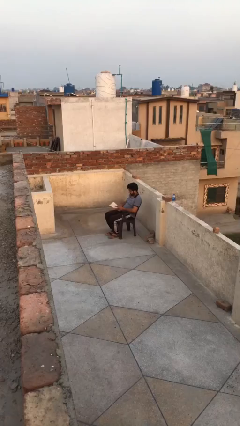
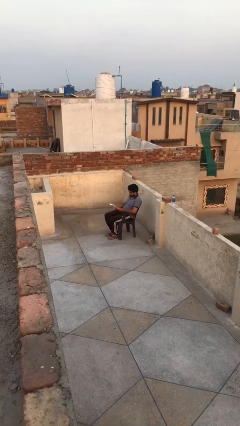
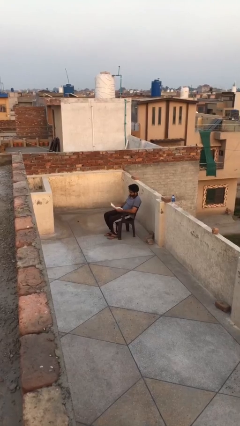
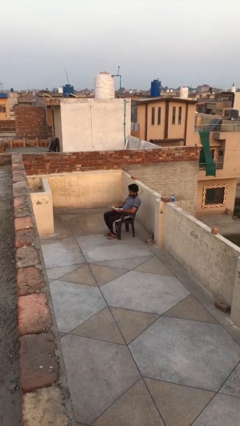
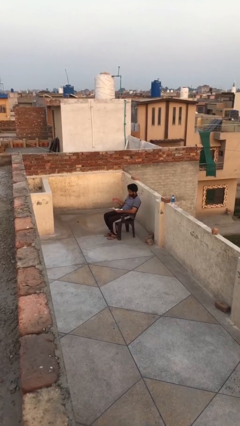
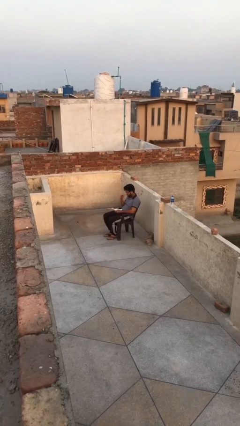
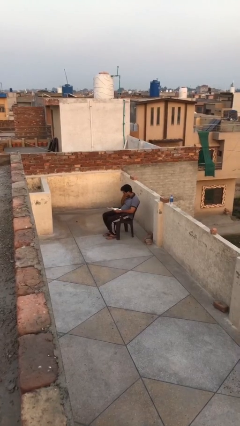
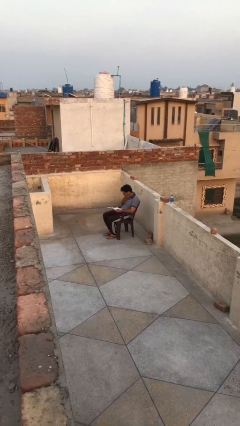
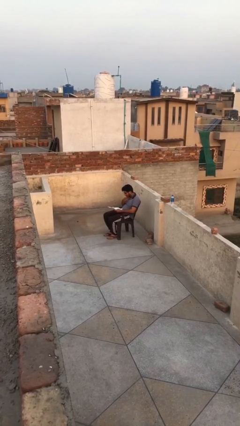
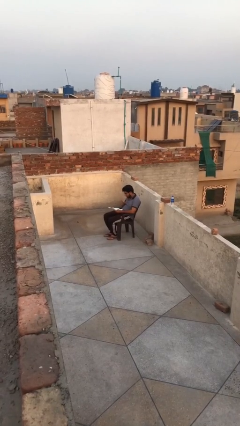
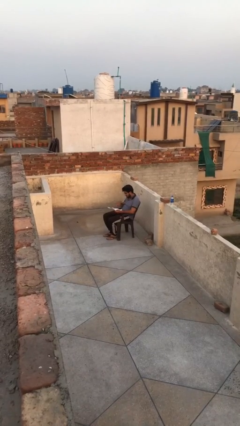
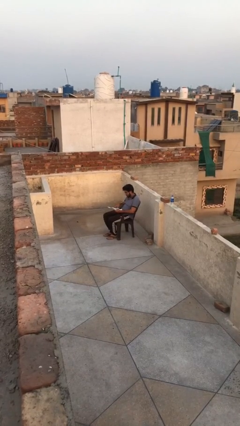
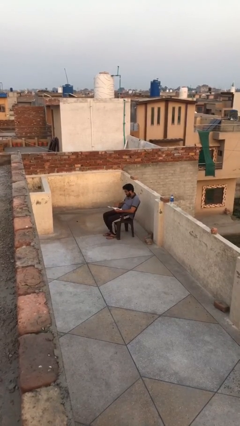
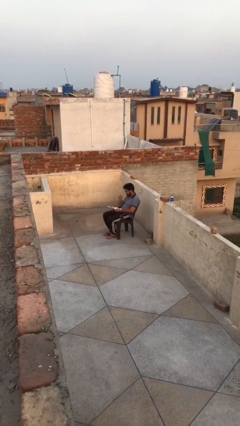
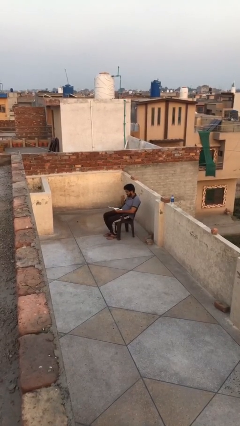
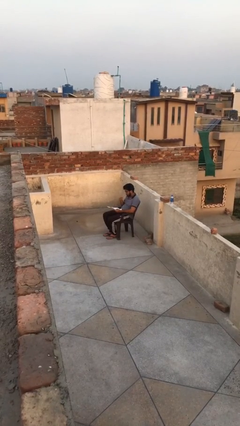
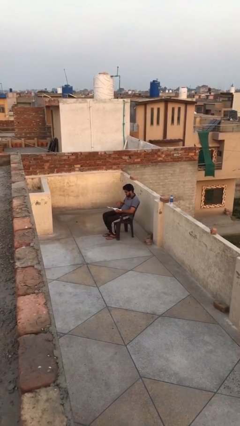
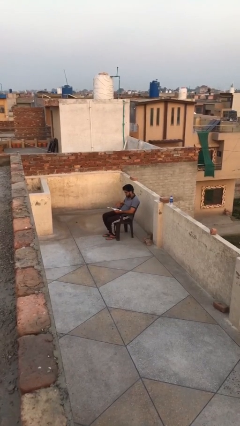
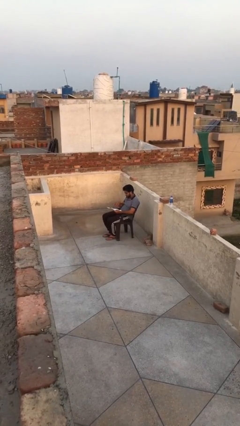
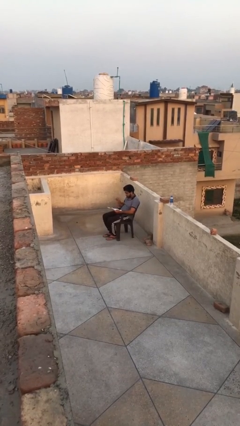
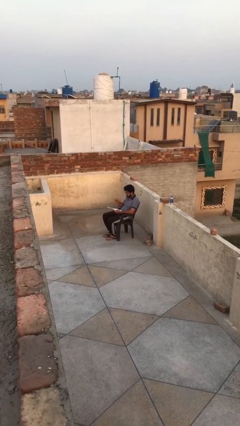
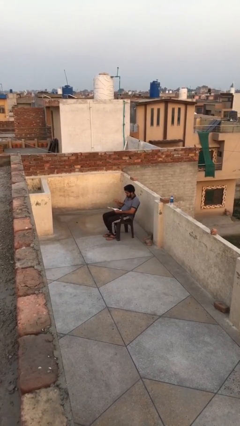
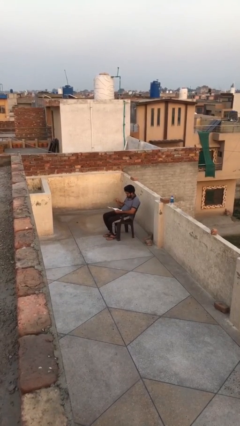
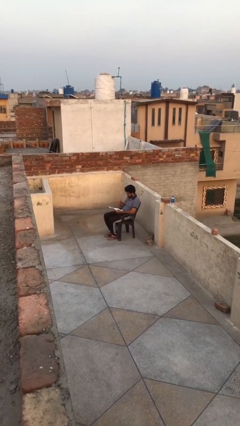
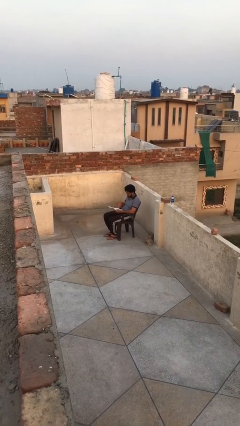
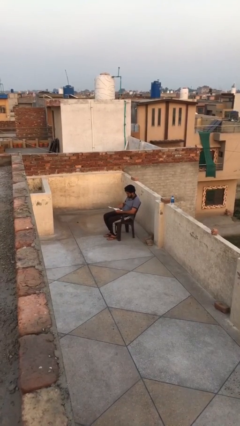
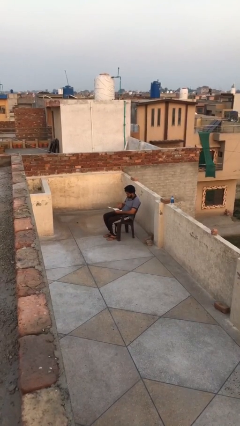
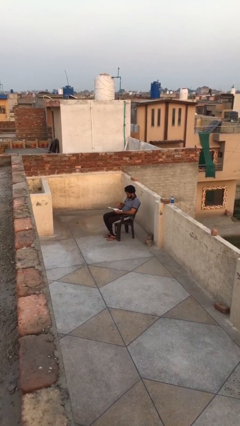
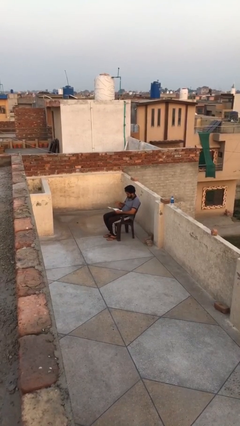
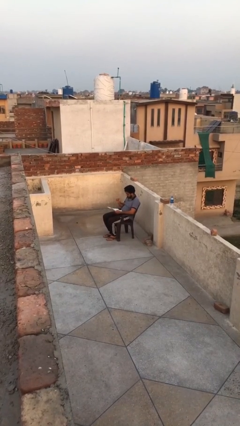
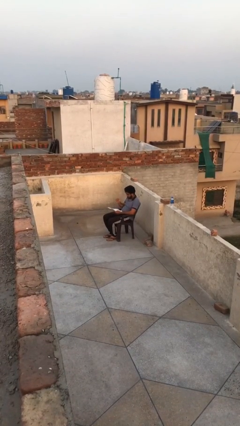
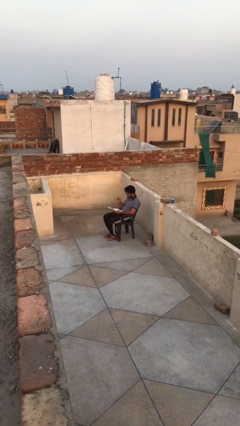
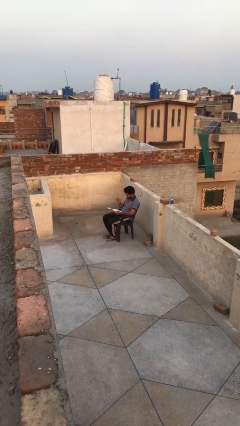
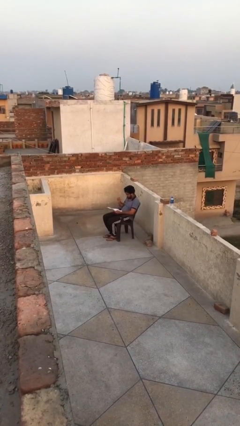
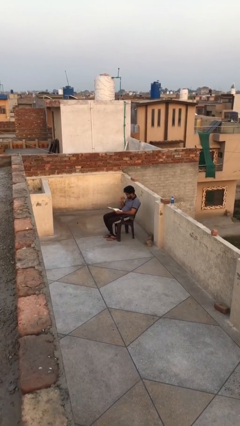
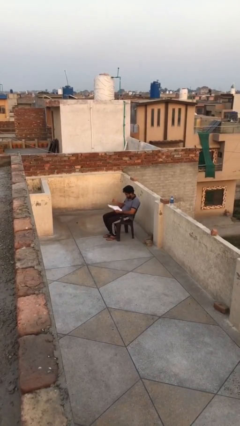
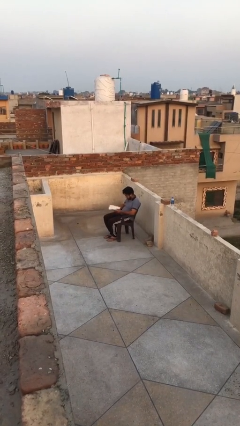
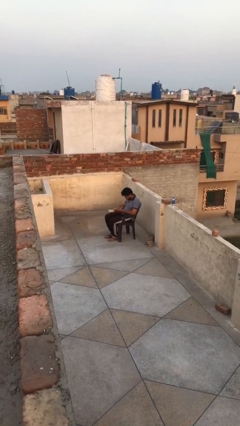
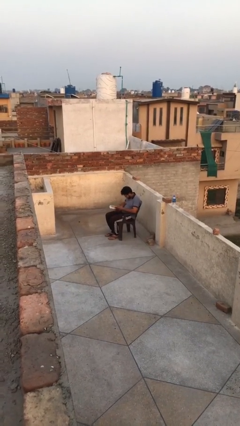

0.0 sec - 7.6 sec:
person reads document

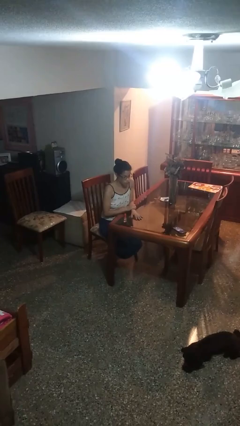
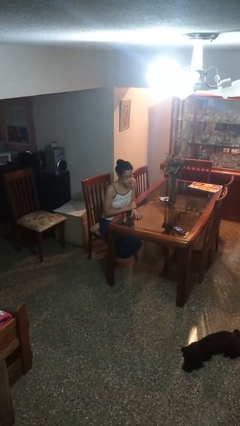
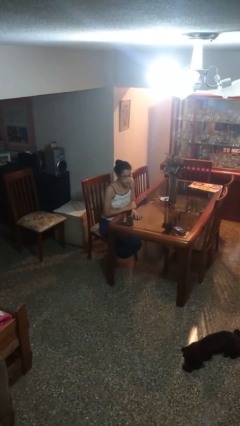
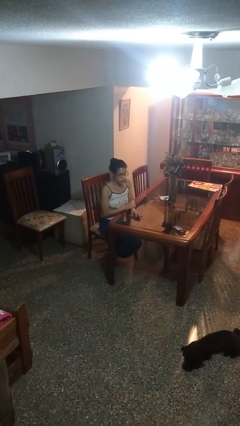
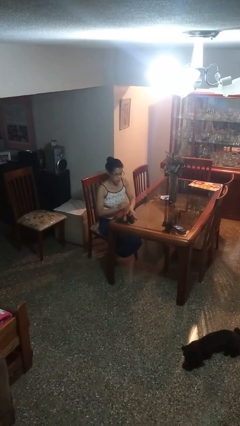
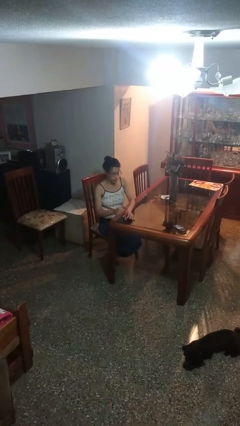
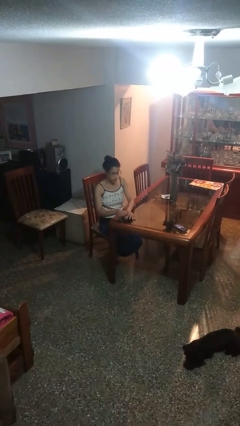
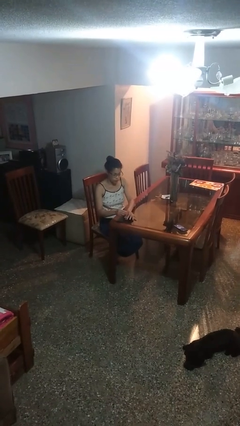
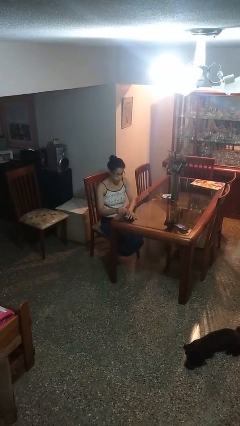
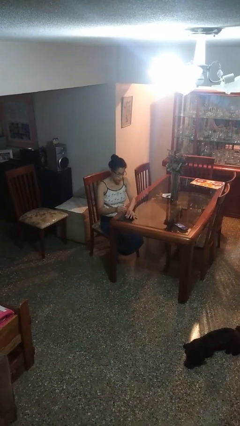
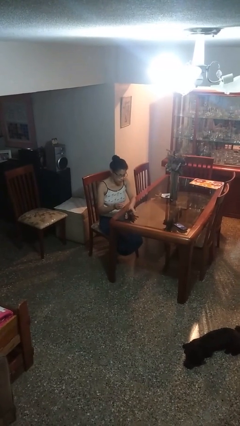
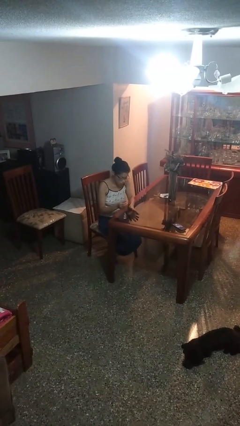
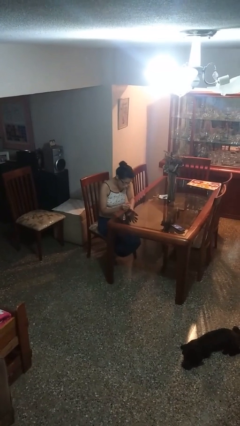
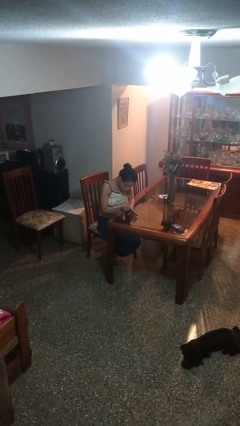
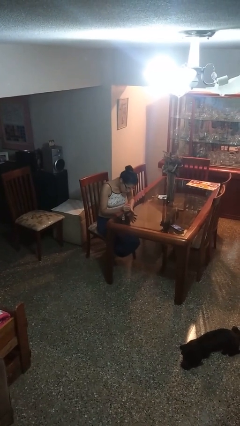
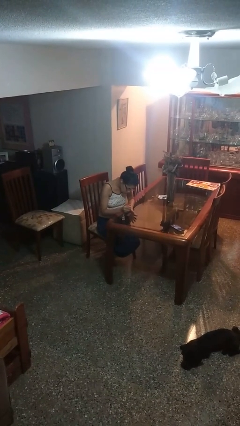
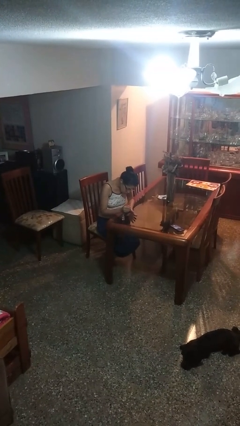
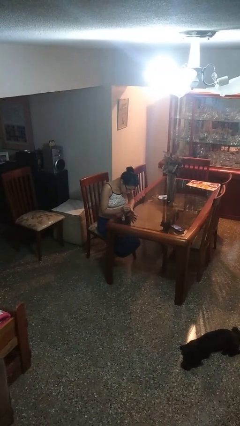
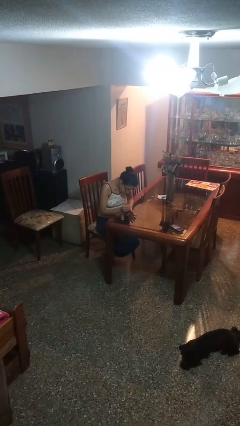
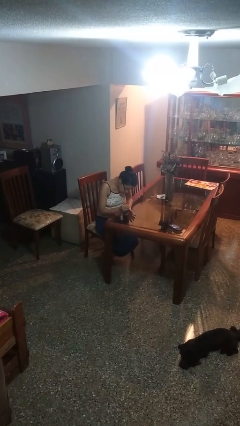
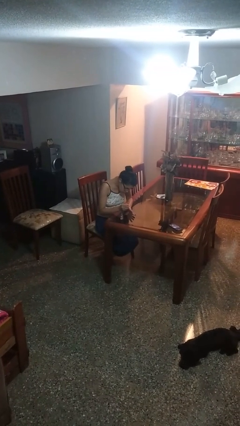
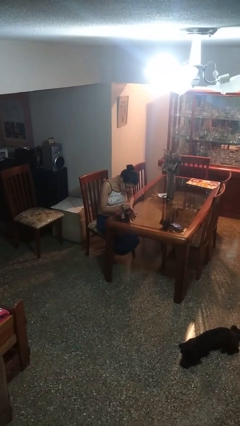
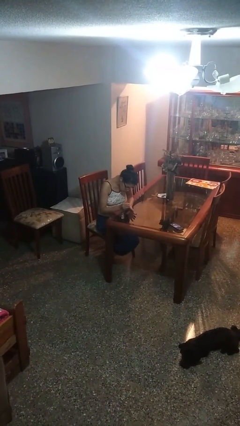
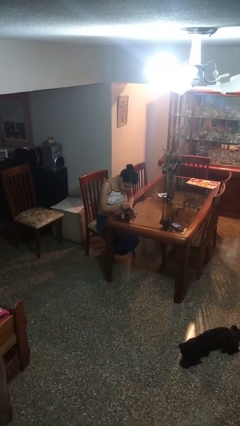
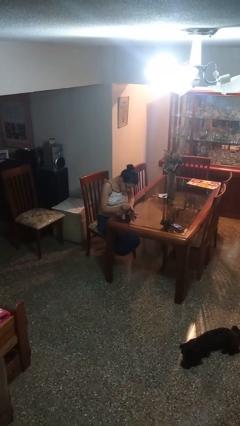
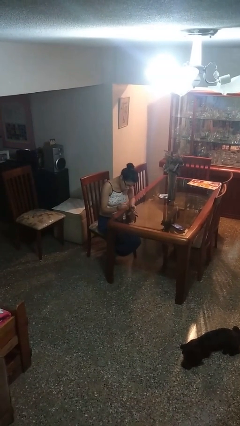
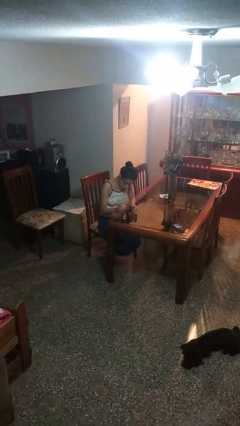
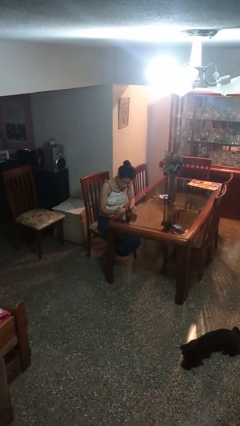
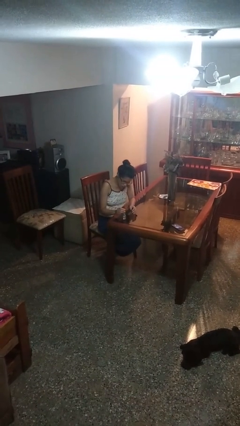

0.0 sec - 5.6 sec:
person paints fingernails

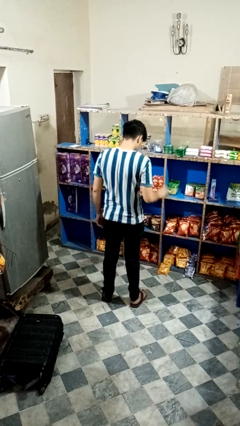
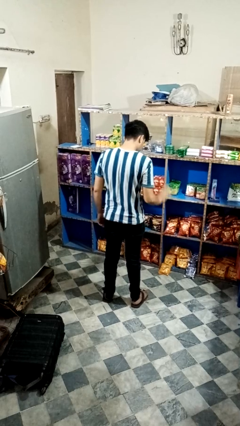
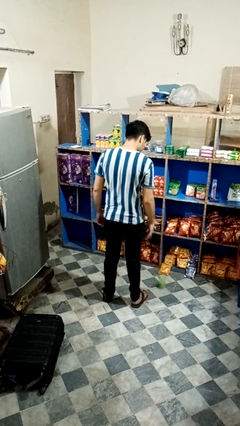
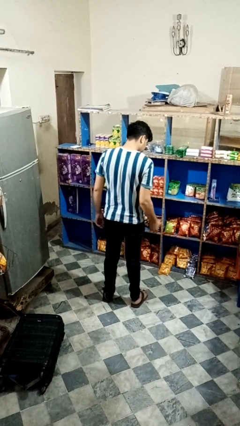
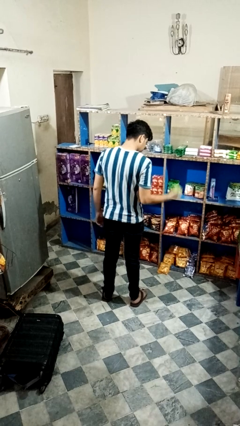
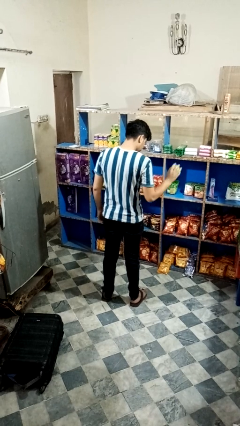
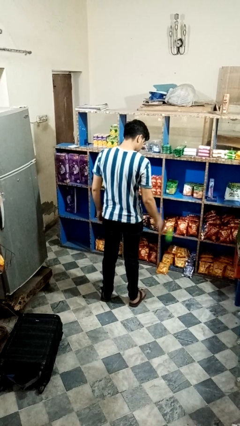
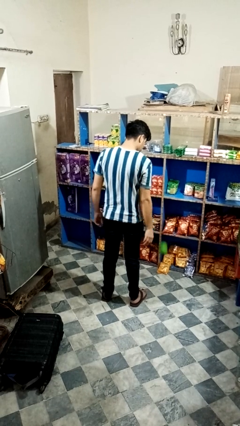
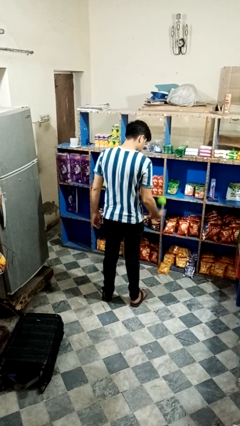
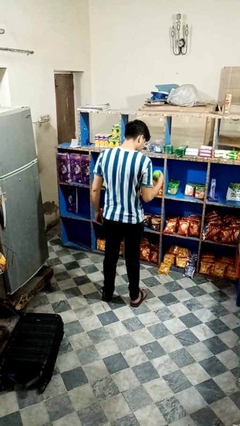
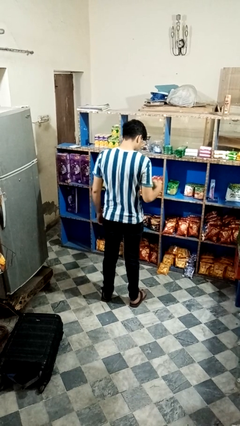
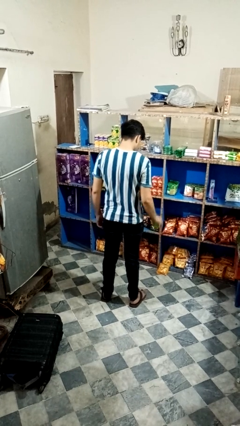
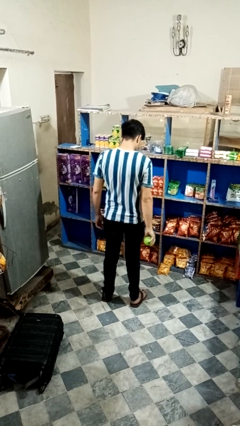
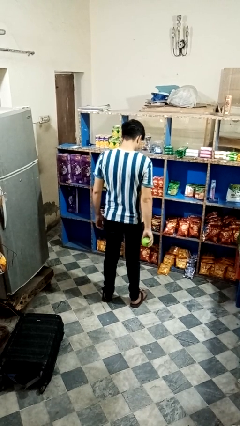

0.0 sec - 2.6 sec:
person bounces ball on floor

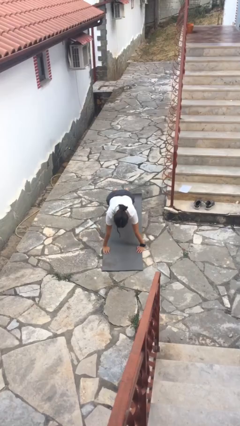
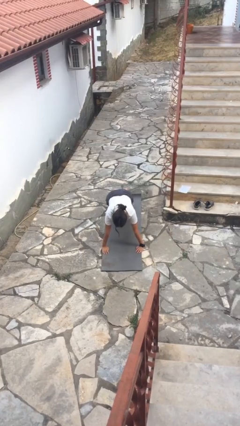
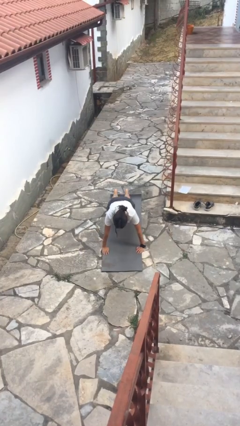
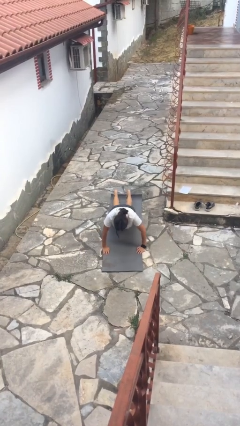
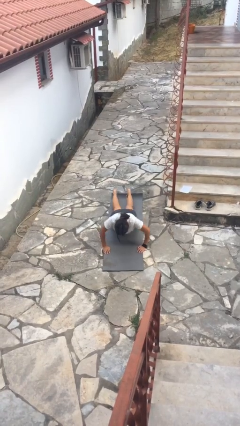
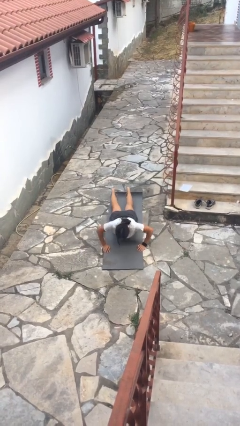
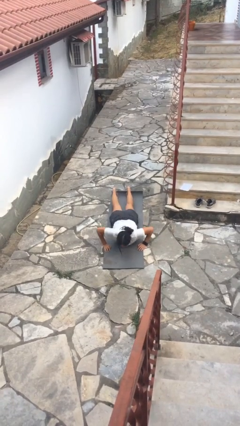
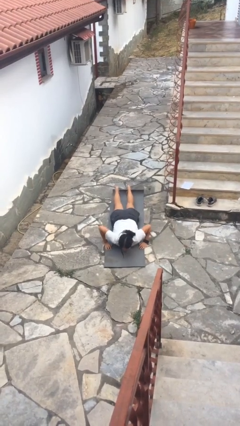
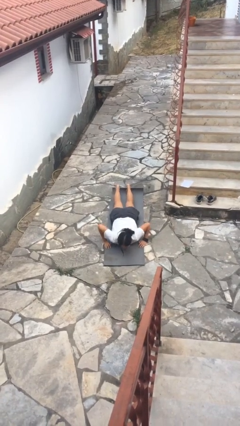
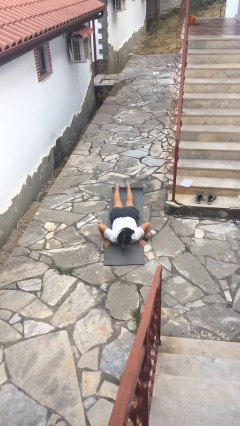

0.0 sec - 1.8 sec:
person exercises with pushup
